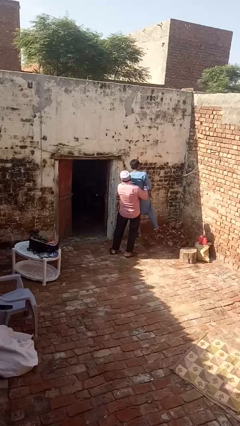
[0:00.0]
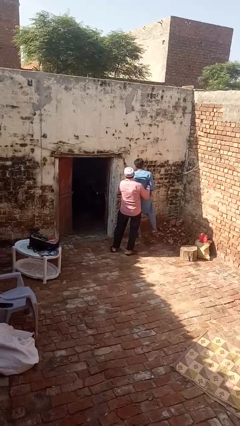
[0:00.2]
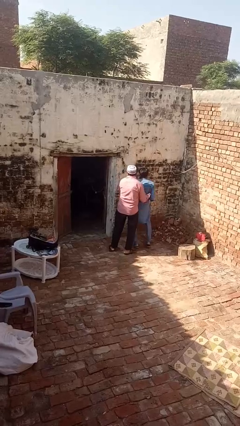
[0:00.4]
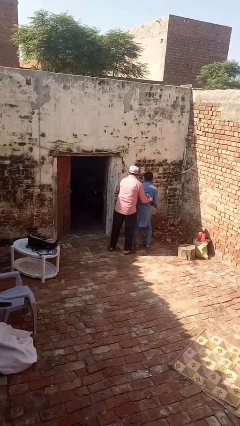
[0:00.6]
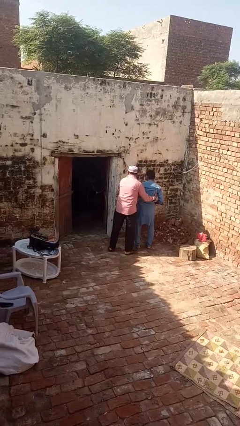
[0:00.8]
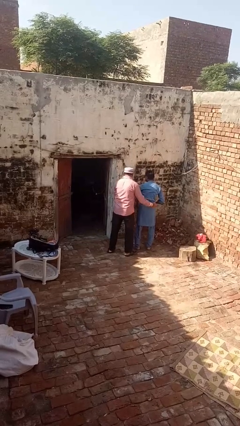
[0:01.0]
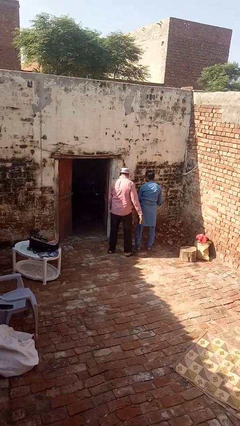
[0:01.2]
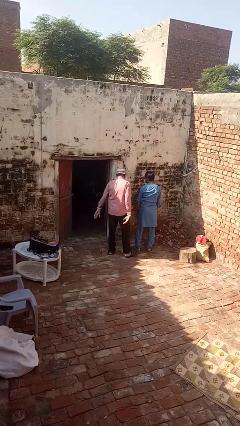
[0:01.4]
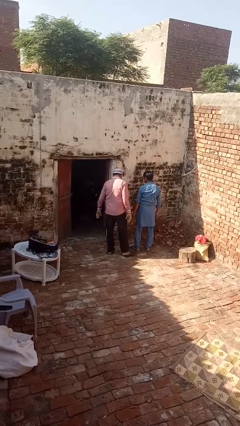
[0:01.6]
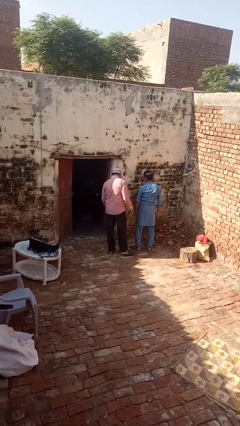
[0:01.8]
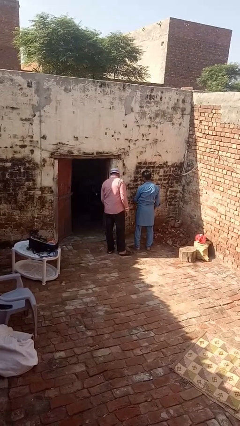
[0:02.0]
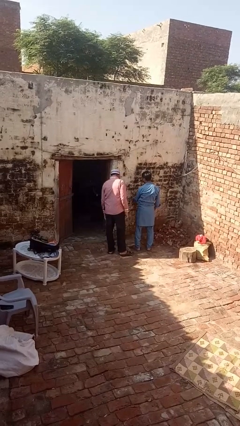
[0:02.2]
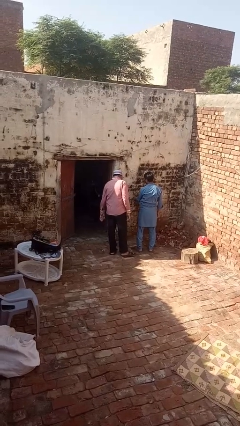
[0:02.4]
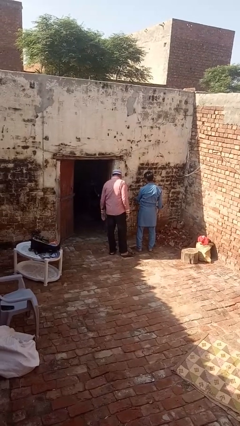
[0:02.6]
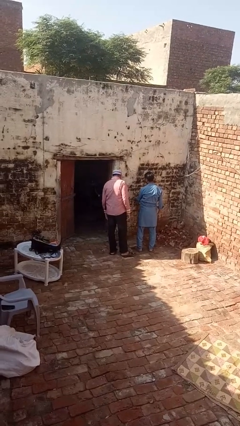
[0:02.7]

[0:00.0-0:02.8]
person puts down person

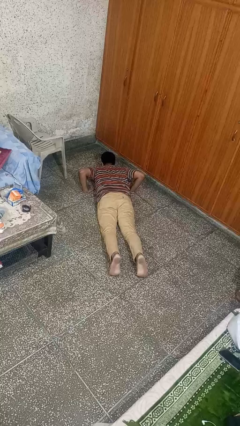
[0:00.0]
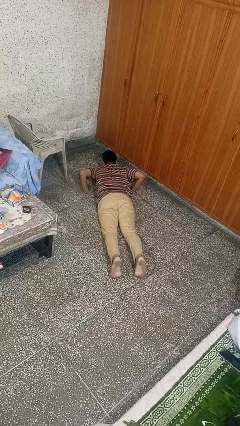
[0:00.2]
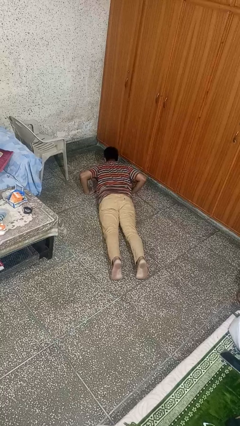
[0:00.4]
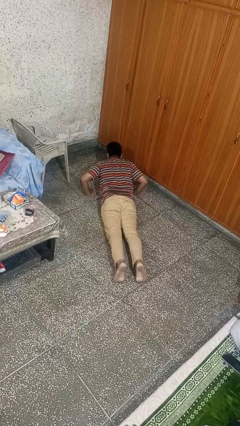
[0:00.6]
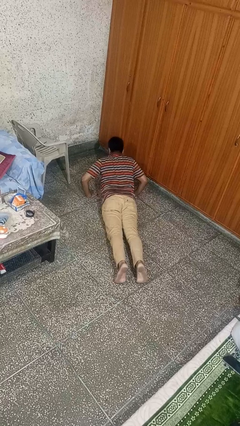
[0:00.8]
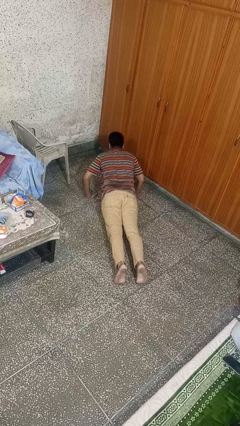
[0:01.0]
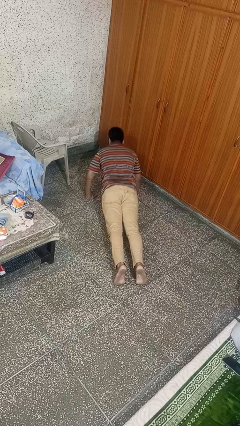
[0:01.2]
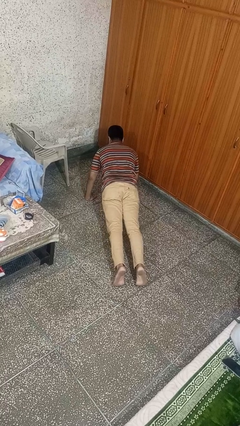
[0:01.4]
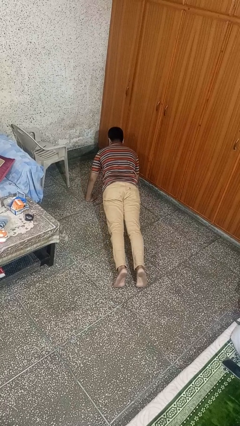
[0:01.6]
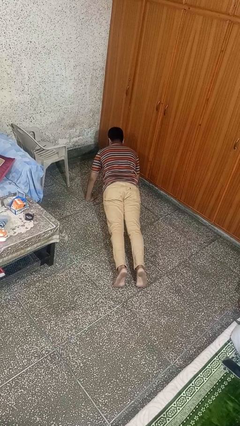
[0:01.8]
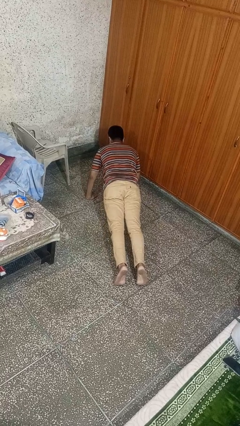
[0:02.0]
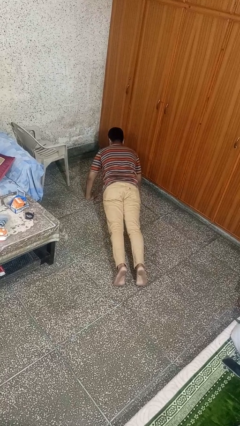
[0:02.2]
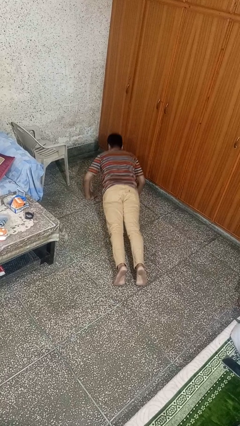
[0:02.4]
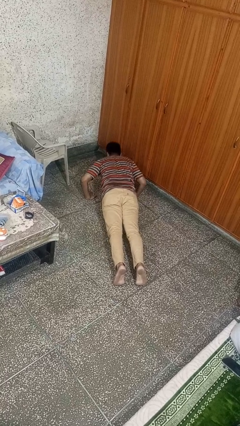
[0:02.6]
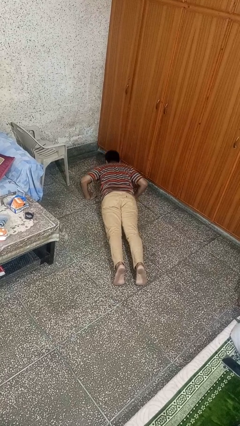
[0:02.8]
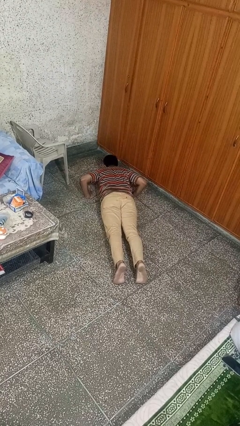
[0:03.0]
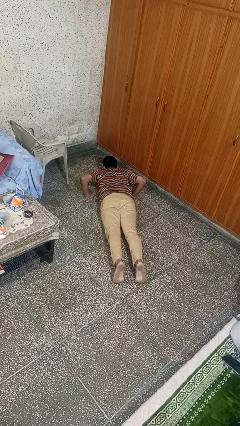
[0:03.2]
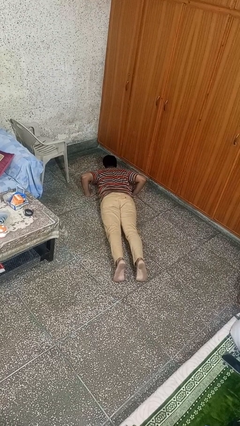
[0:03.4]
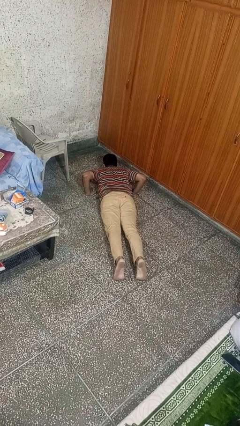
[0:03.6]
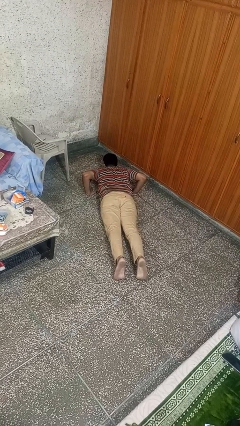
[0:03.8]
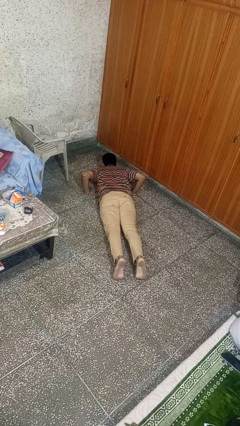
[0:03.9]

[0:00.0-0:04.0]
person exercises with pushup

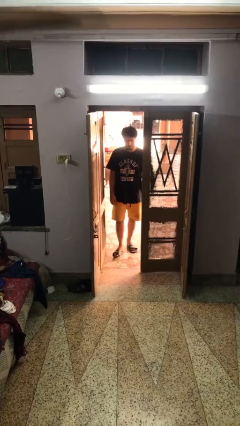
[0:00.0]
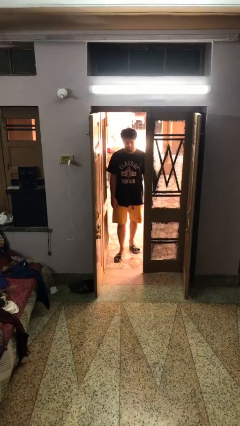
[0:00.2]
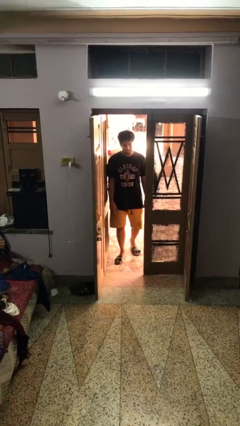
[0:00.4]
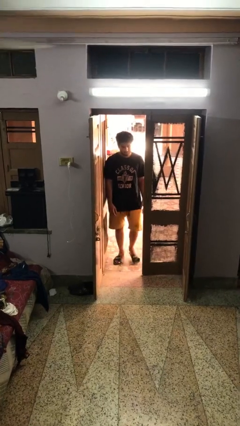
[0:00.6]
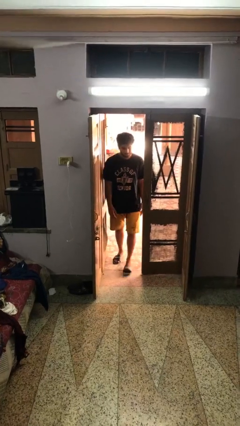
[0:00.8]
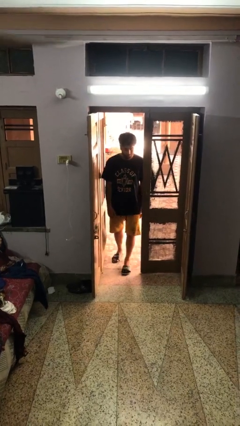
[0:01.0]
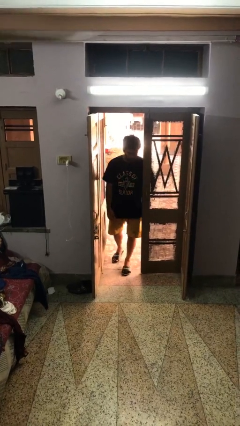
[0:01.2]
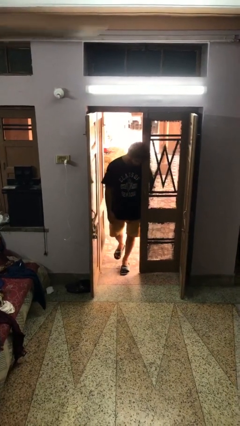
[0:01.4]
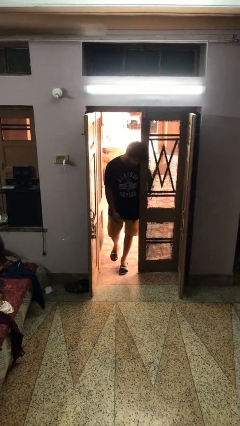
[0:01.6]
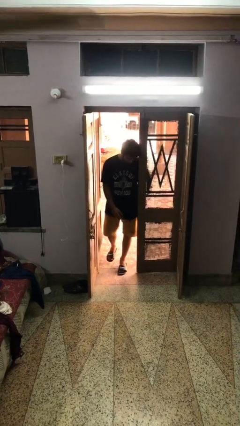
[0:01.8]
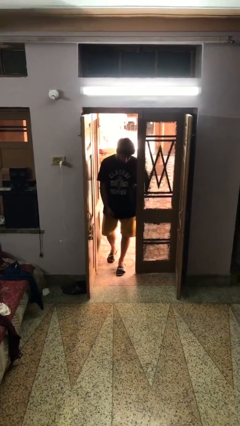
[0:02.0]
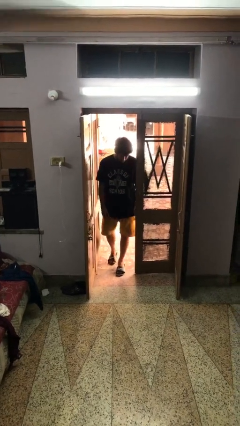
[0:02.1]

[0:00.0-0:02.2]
person bumps into wall

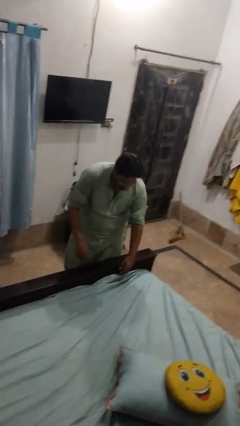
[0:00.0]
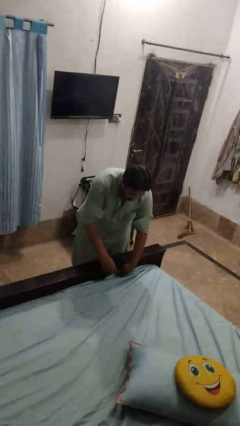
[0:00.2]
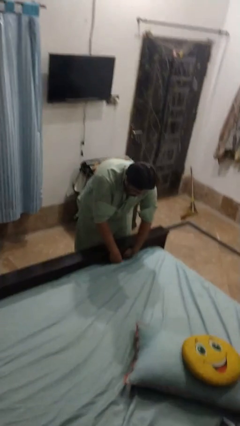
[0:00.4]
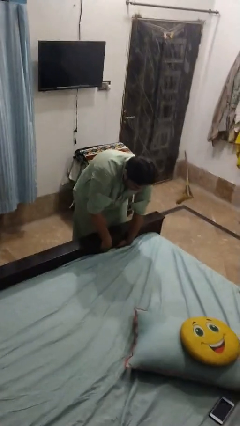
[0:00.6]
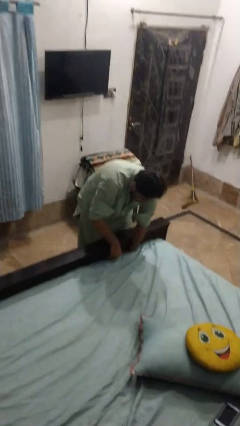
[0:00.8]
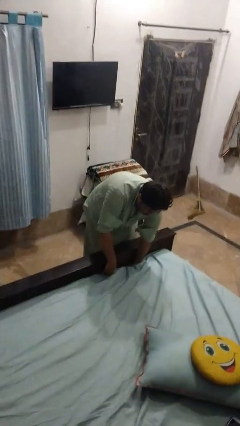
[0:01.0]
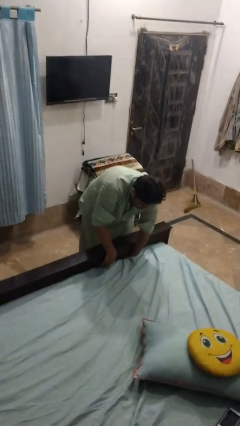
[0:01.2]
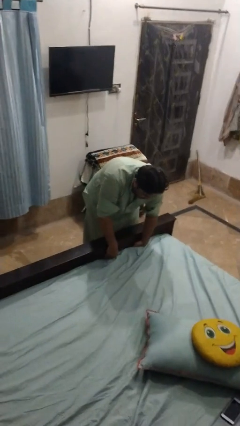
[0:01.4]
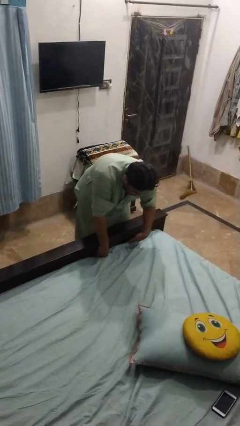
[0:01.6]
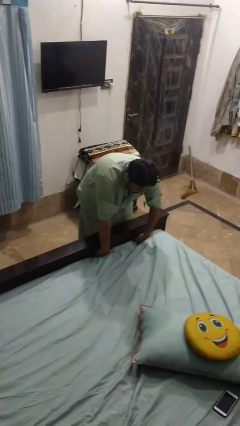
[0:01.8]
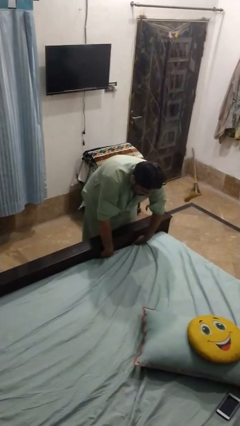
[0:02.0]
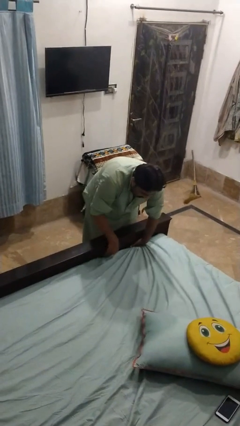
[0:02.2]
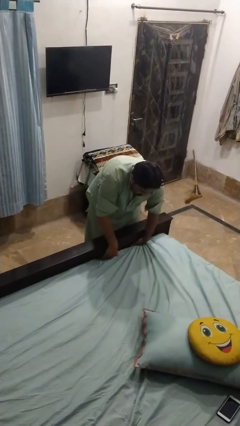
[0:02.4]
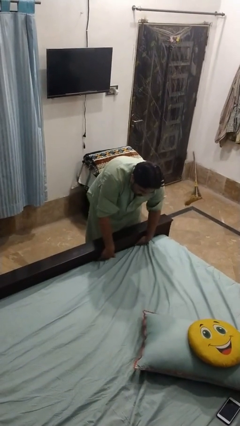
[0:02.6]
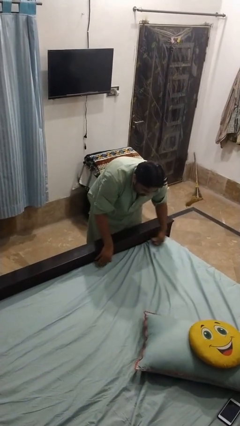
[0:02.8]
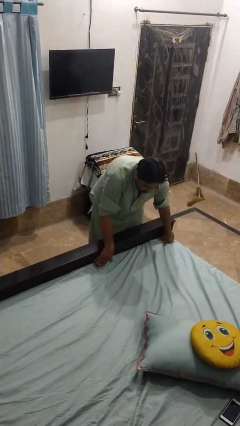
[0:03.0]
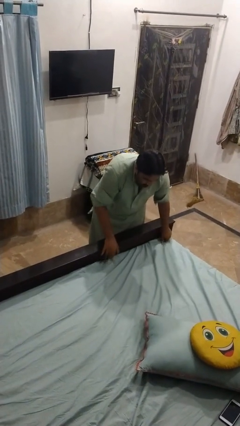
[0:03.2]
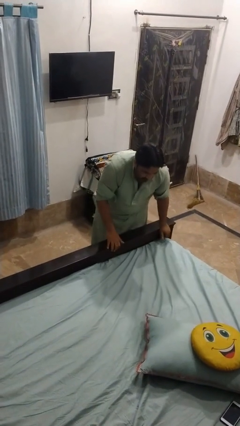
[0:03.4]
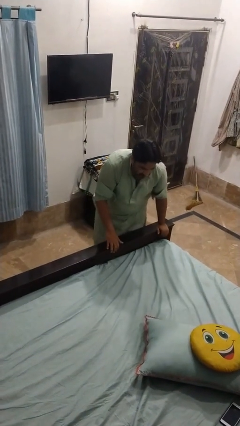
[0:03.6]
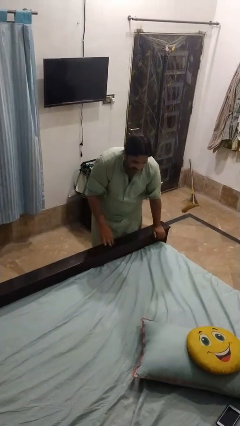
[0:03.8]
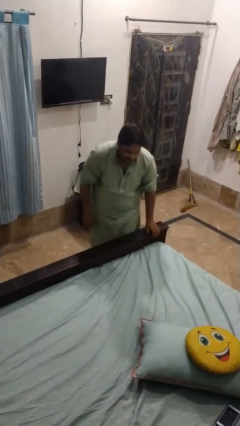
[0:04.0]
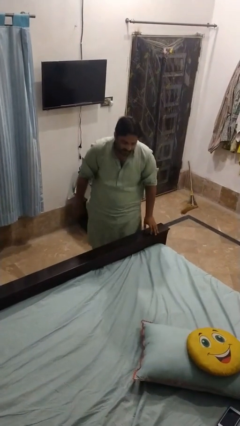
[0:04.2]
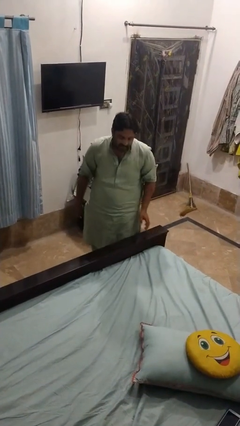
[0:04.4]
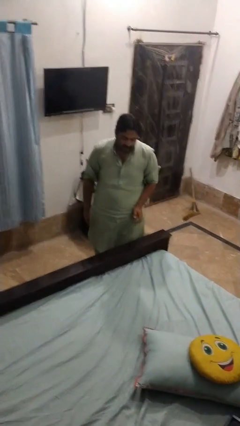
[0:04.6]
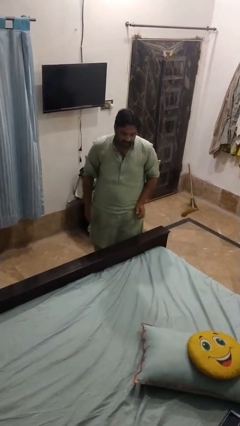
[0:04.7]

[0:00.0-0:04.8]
person makes bed

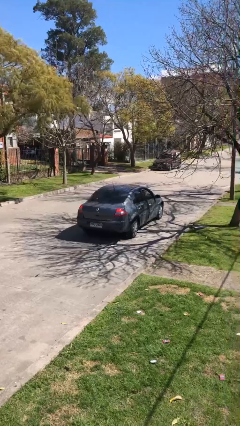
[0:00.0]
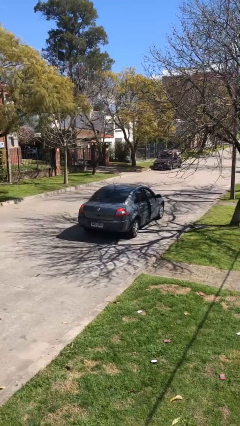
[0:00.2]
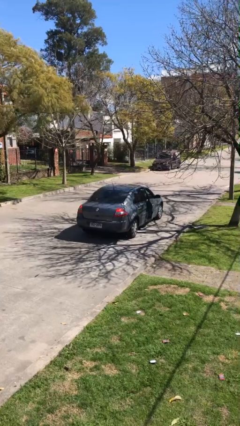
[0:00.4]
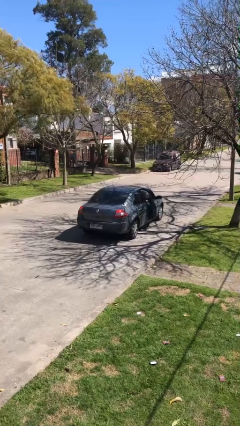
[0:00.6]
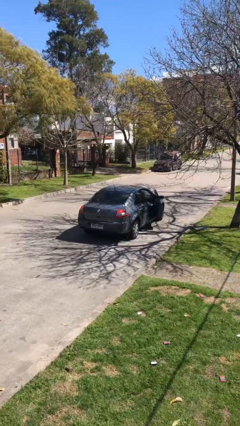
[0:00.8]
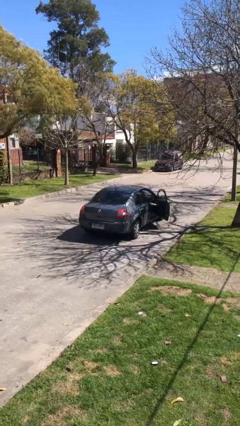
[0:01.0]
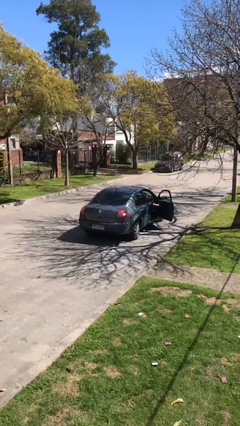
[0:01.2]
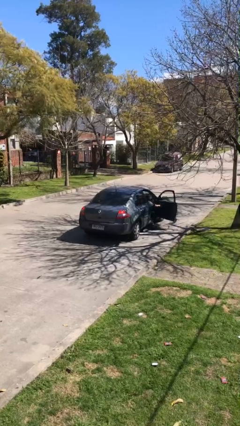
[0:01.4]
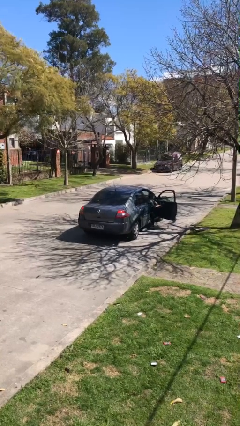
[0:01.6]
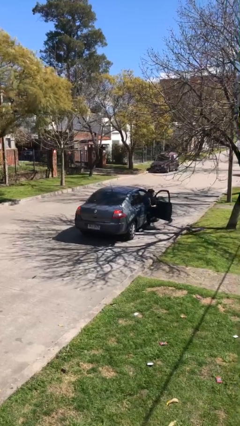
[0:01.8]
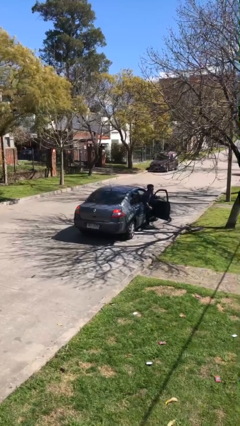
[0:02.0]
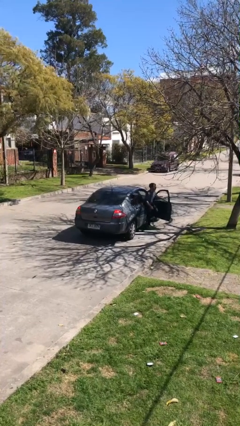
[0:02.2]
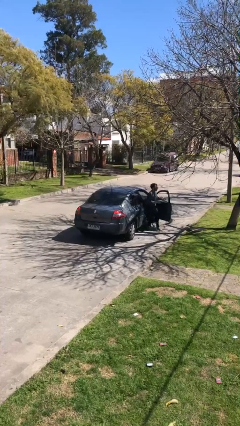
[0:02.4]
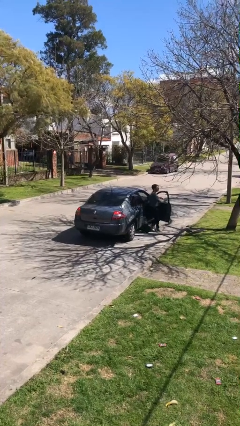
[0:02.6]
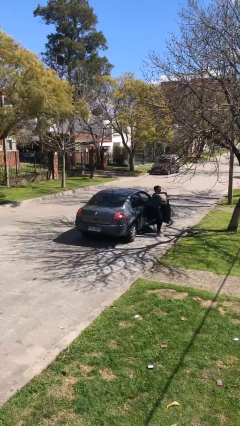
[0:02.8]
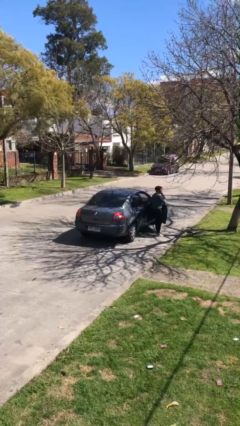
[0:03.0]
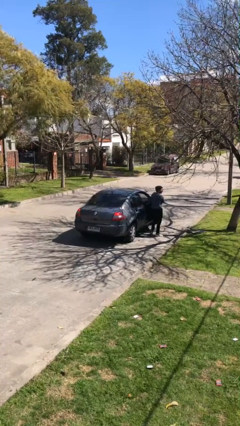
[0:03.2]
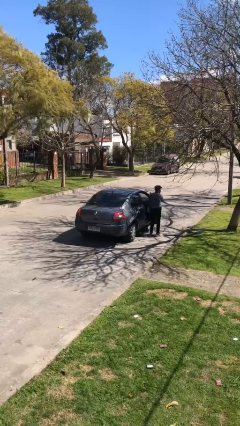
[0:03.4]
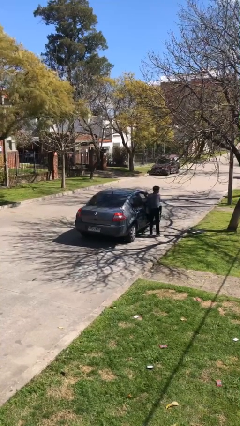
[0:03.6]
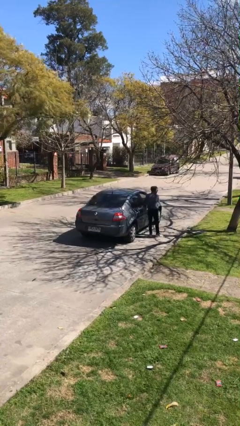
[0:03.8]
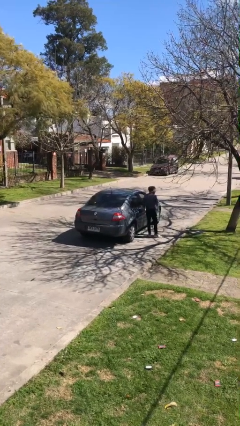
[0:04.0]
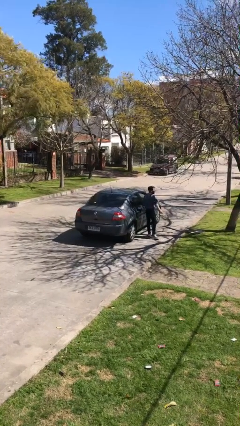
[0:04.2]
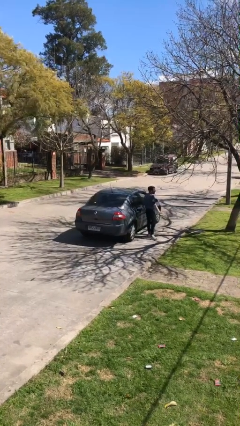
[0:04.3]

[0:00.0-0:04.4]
car drops off person
